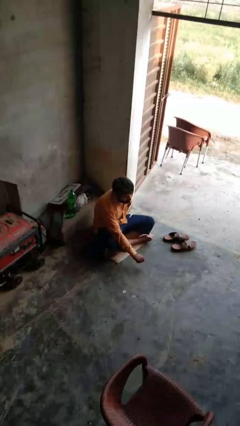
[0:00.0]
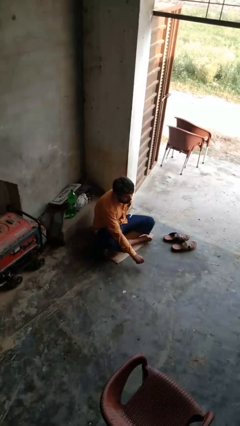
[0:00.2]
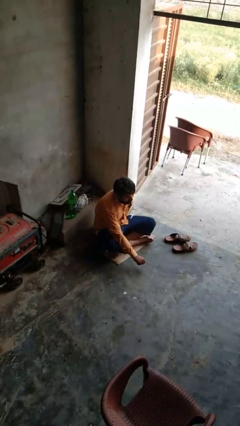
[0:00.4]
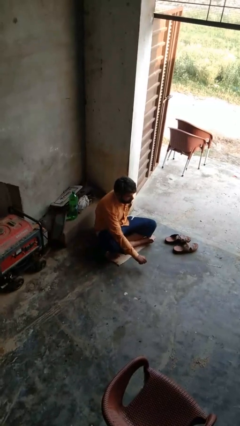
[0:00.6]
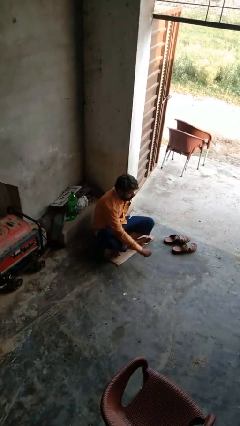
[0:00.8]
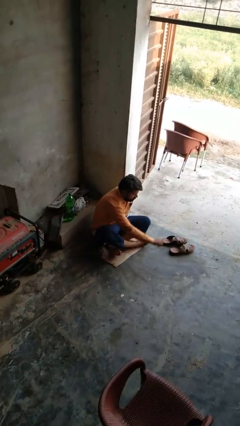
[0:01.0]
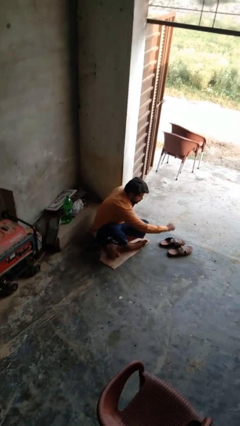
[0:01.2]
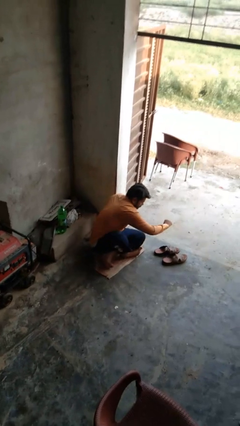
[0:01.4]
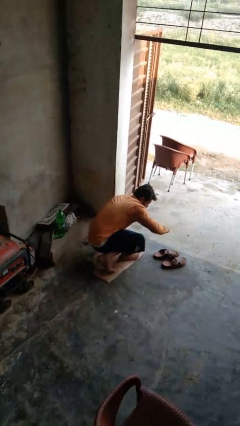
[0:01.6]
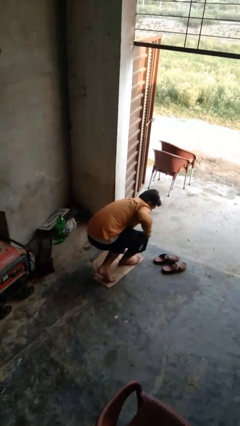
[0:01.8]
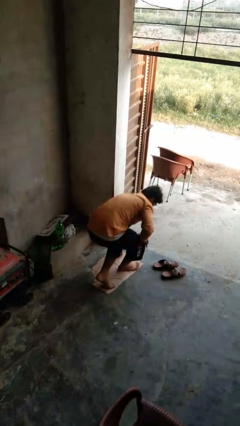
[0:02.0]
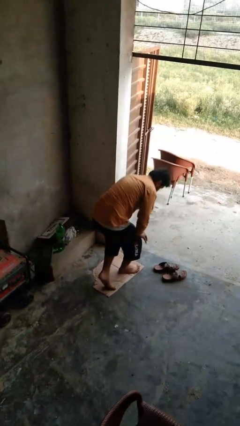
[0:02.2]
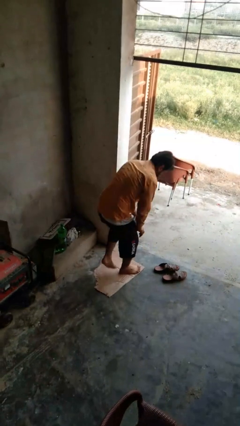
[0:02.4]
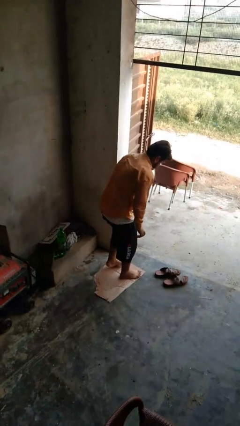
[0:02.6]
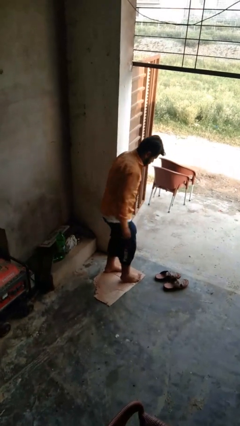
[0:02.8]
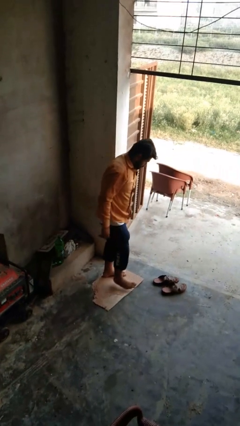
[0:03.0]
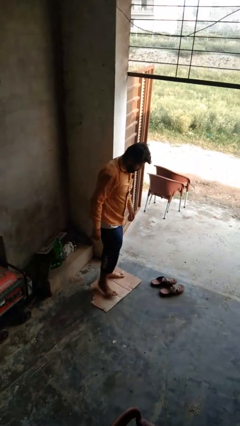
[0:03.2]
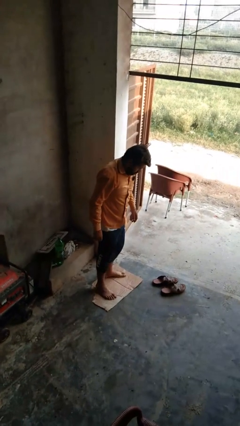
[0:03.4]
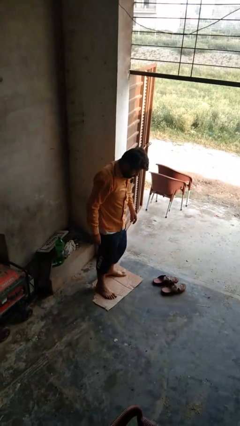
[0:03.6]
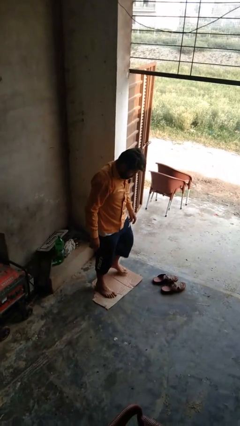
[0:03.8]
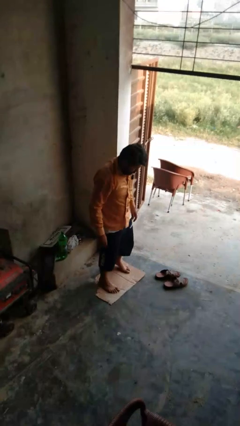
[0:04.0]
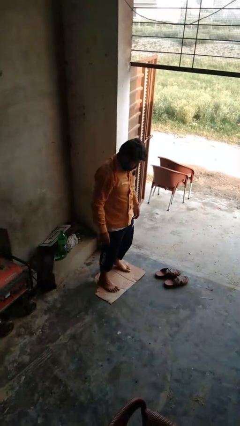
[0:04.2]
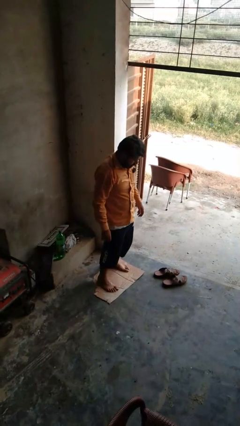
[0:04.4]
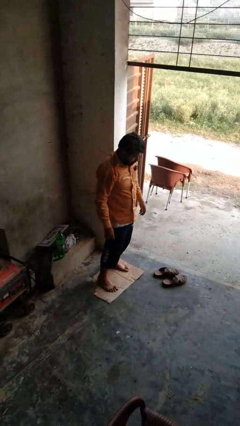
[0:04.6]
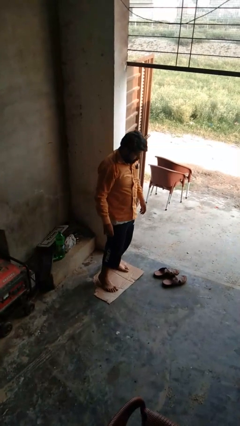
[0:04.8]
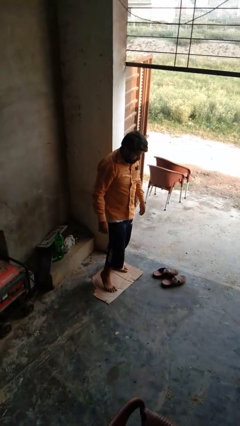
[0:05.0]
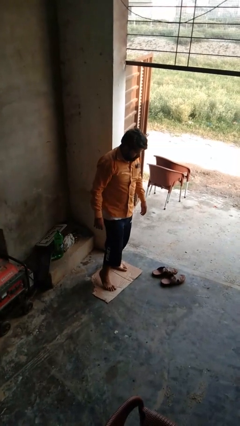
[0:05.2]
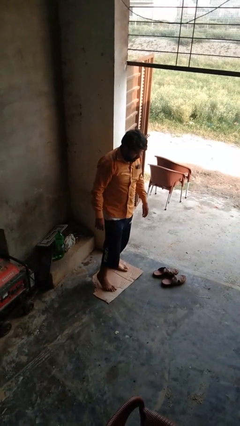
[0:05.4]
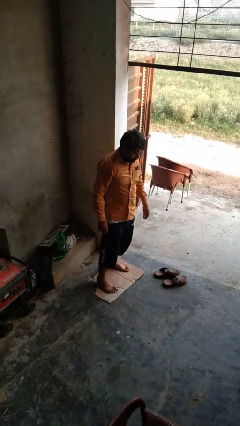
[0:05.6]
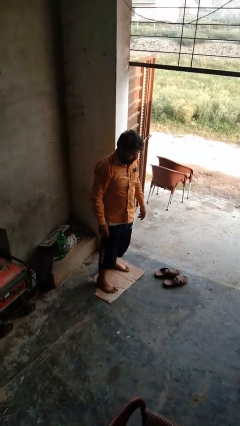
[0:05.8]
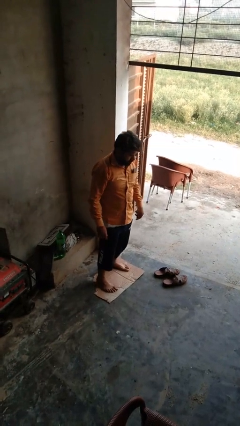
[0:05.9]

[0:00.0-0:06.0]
person stands up from floor

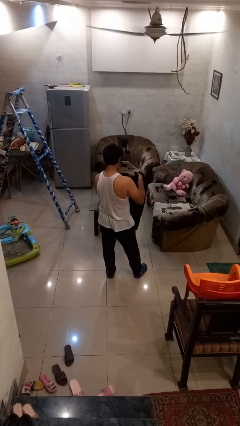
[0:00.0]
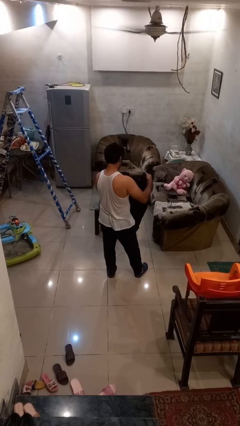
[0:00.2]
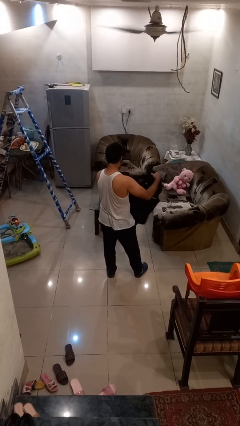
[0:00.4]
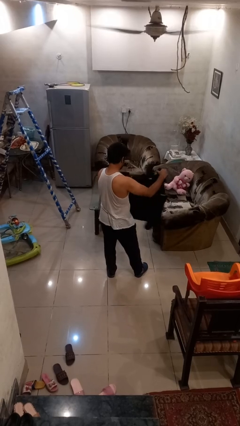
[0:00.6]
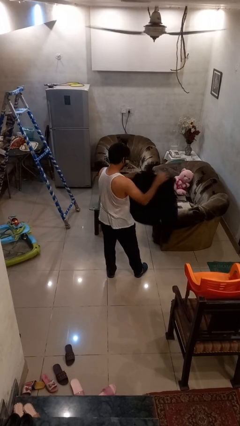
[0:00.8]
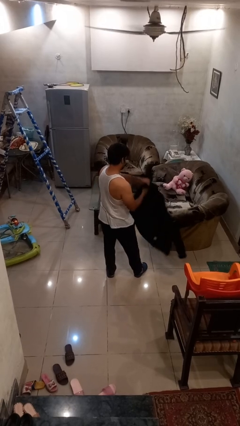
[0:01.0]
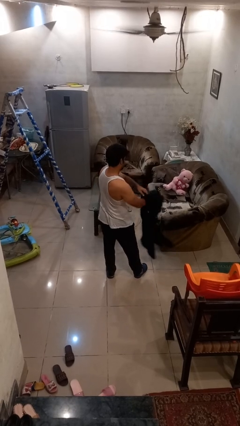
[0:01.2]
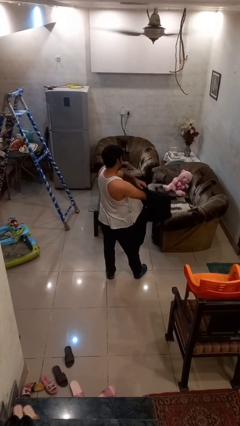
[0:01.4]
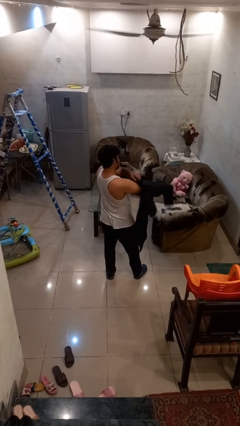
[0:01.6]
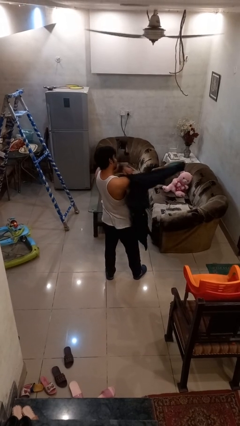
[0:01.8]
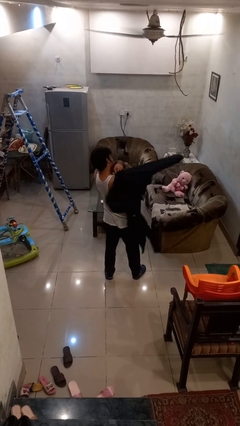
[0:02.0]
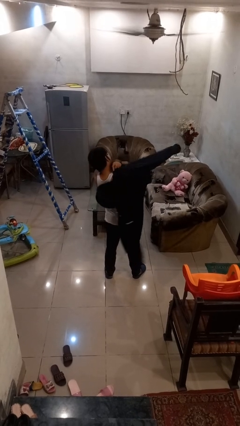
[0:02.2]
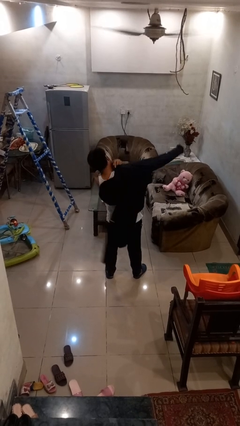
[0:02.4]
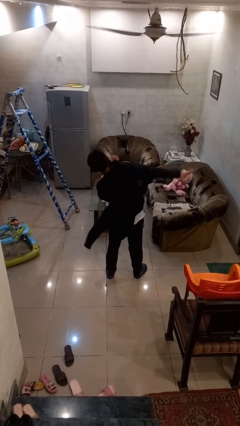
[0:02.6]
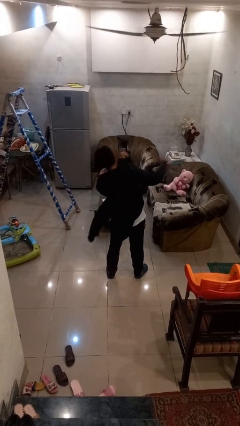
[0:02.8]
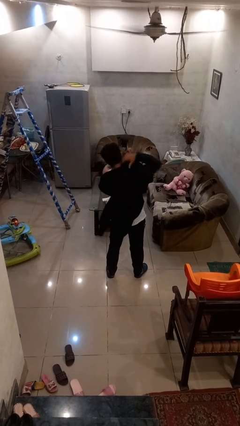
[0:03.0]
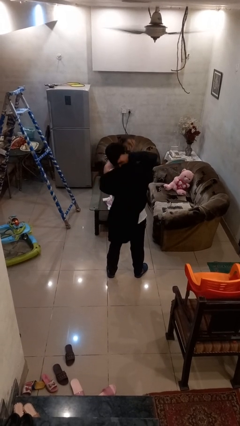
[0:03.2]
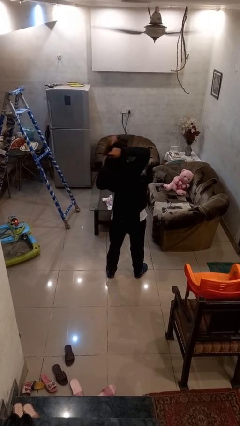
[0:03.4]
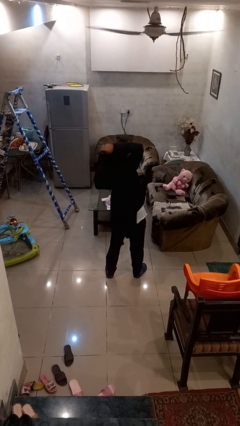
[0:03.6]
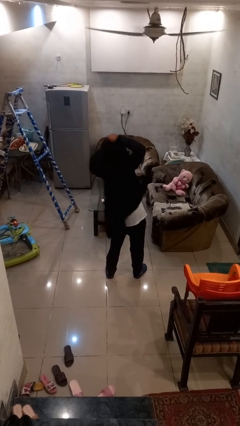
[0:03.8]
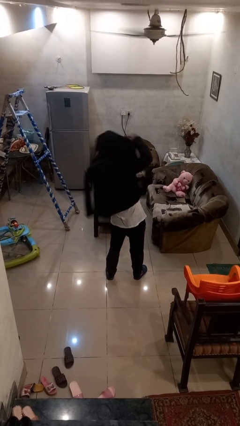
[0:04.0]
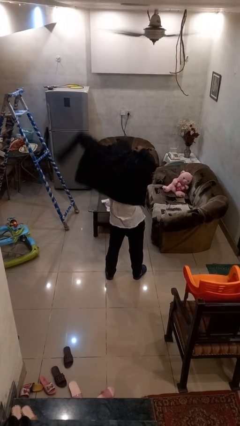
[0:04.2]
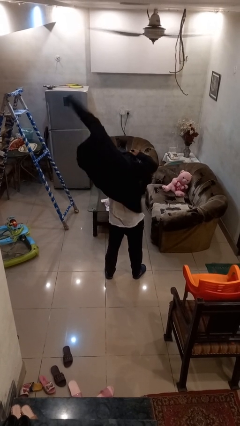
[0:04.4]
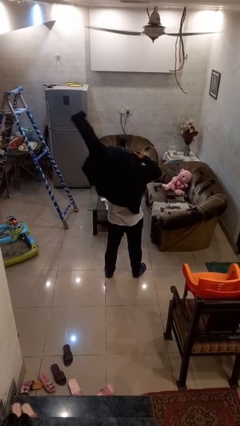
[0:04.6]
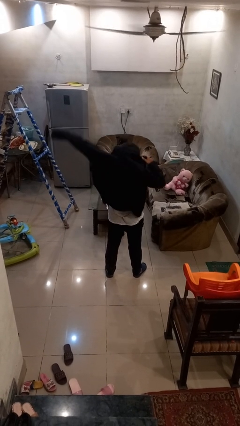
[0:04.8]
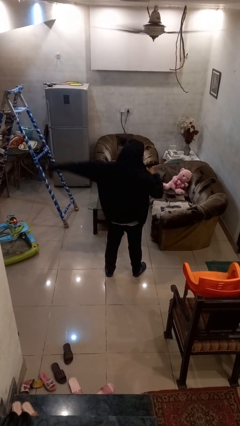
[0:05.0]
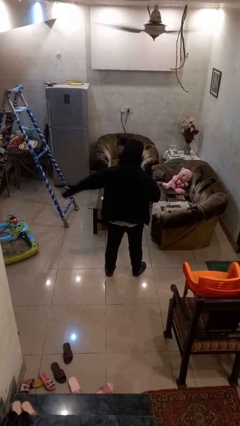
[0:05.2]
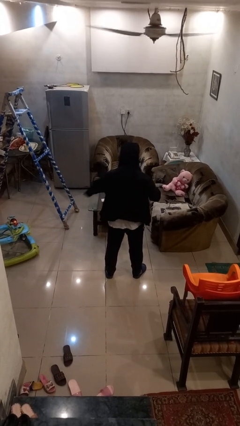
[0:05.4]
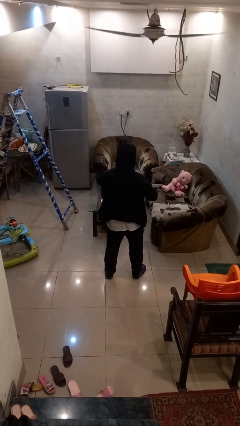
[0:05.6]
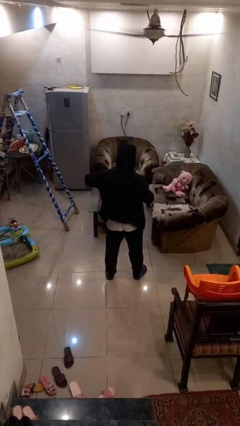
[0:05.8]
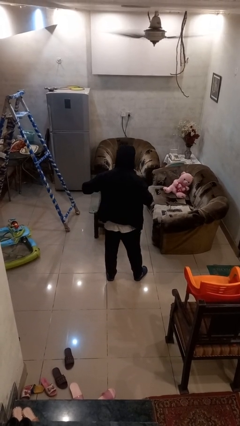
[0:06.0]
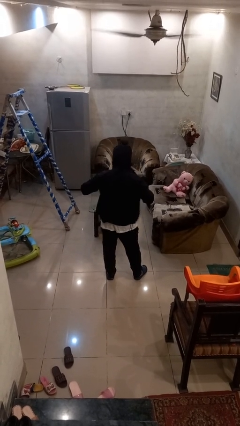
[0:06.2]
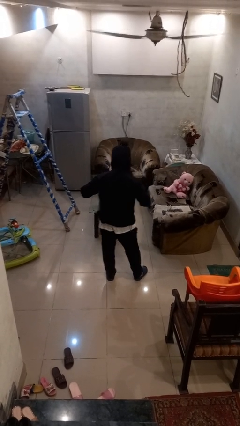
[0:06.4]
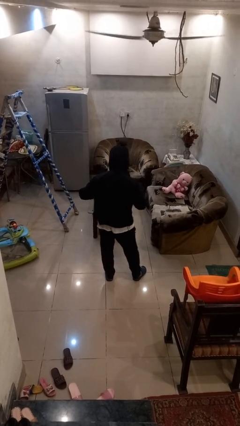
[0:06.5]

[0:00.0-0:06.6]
person puts on hoodie

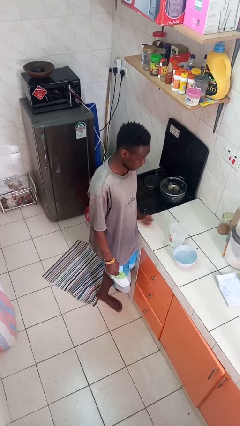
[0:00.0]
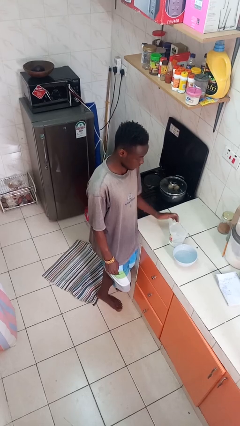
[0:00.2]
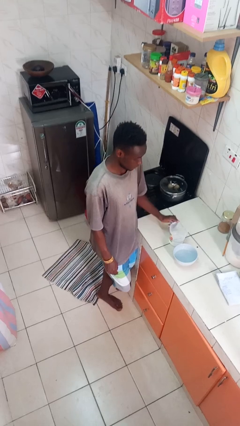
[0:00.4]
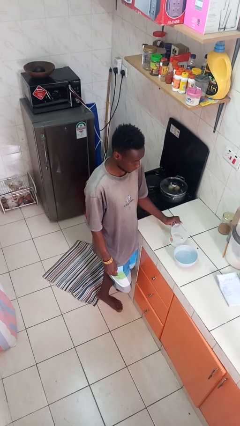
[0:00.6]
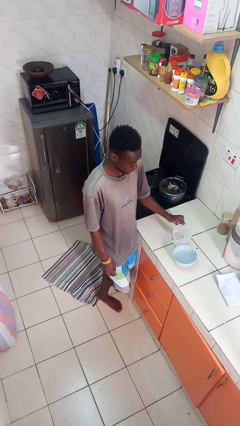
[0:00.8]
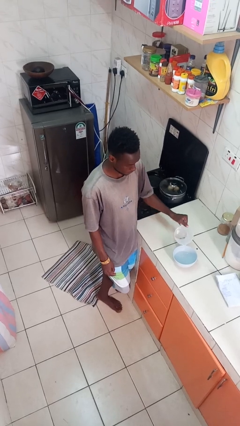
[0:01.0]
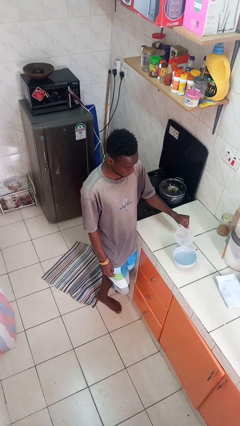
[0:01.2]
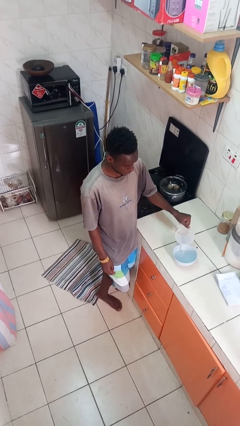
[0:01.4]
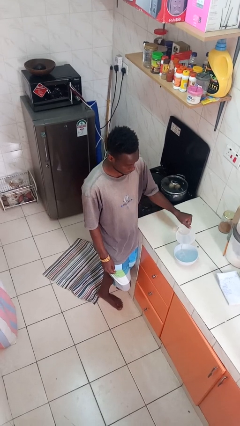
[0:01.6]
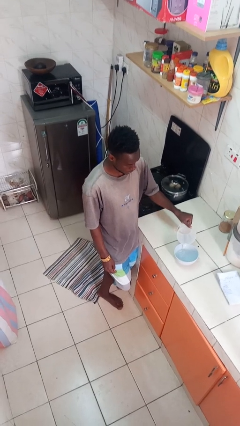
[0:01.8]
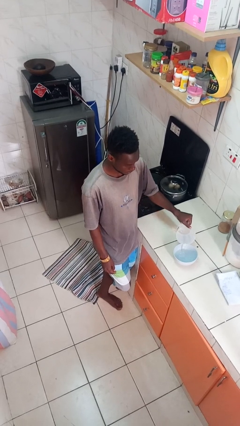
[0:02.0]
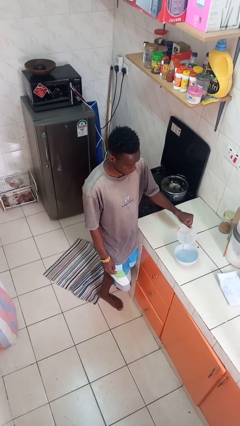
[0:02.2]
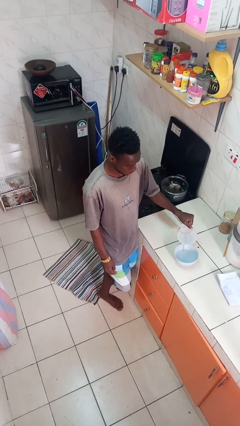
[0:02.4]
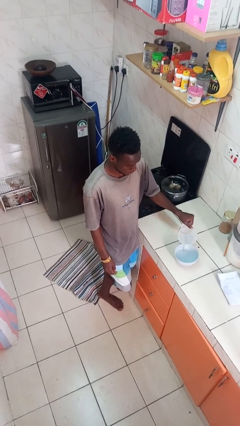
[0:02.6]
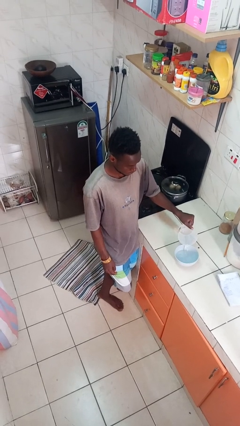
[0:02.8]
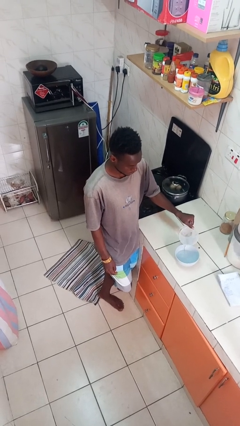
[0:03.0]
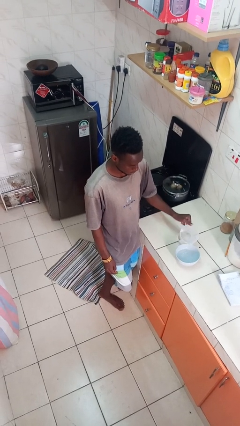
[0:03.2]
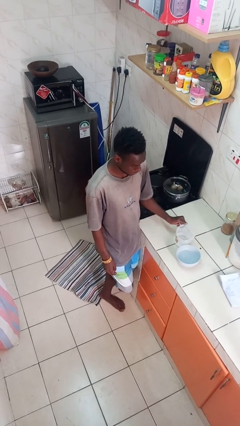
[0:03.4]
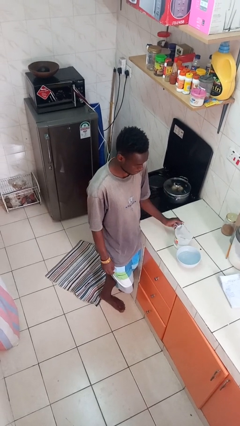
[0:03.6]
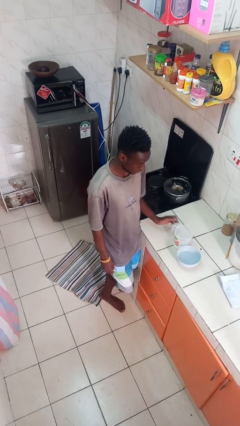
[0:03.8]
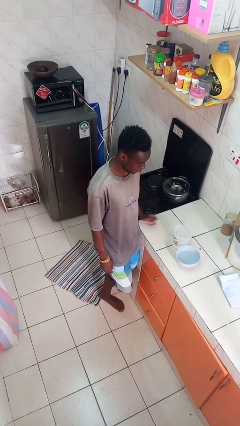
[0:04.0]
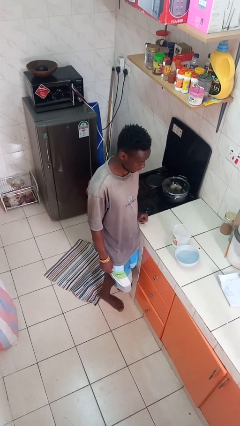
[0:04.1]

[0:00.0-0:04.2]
person pours into bowl

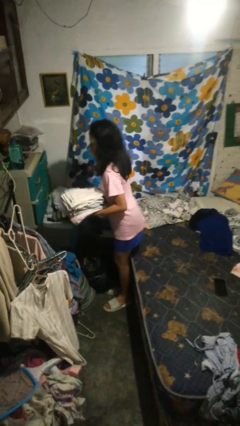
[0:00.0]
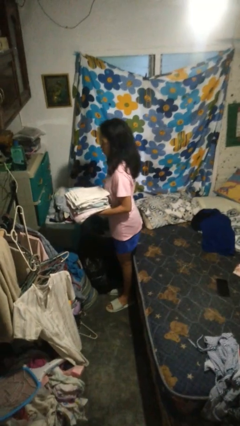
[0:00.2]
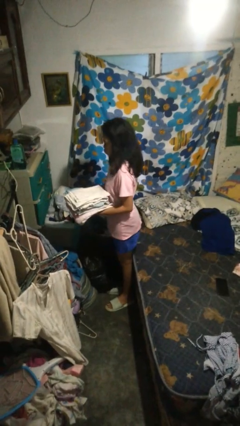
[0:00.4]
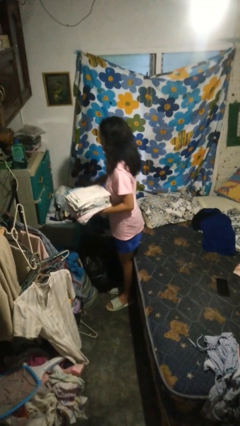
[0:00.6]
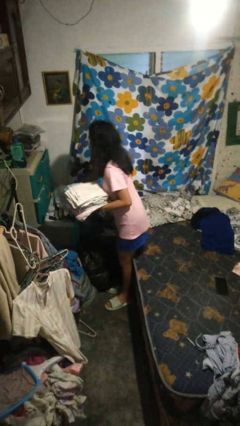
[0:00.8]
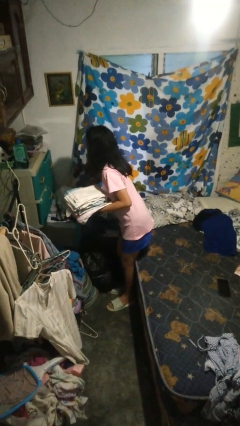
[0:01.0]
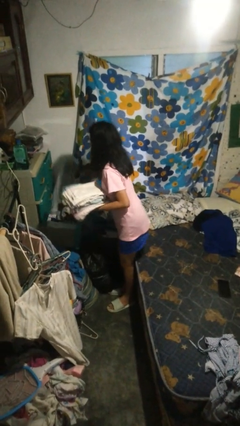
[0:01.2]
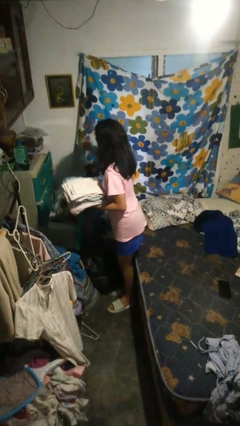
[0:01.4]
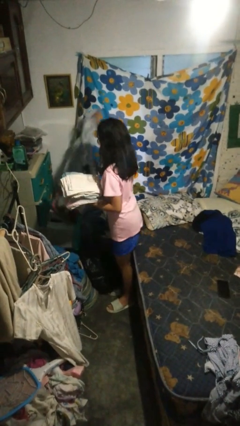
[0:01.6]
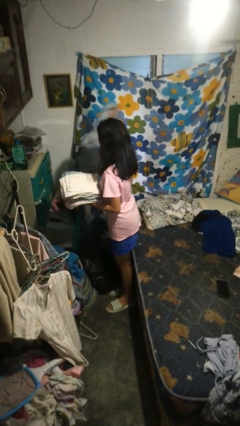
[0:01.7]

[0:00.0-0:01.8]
person takes clothes from dresser
